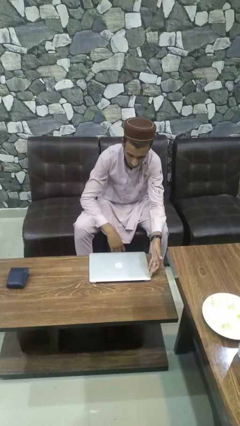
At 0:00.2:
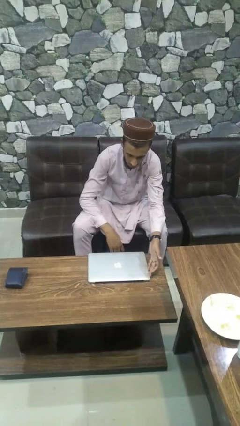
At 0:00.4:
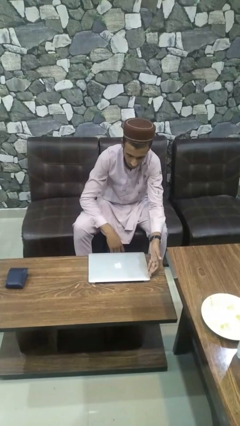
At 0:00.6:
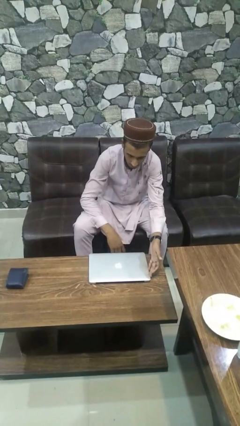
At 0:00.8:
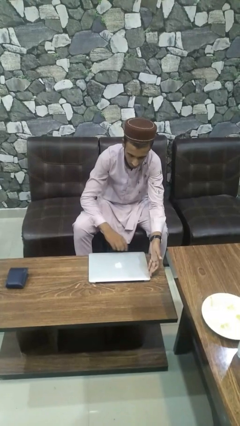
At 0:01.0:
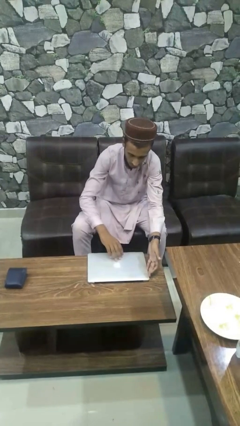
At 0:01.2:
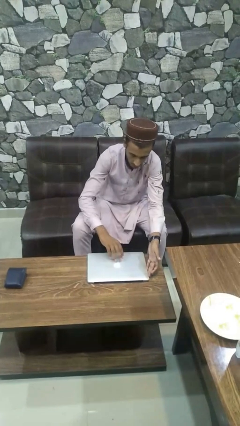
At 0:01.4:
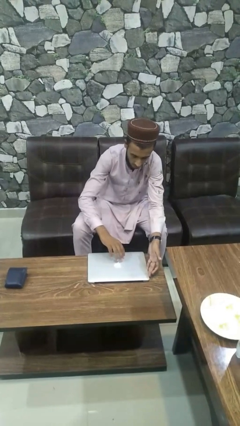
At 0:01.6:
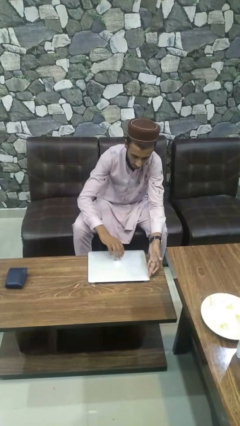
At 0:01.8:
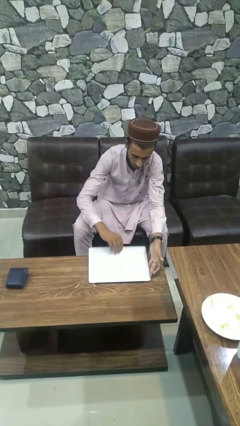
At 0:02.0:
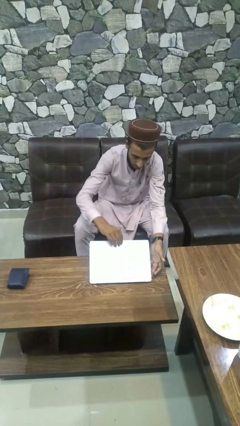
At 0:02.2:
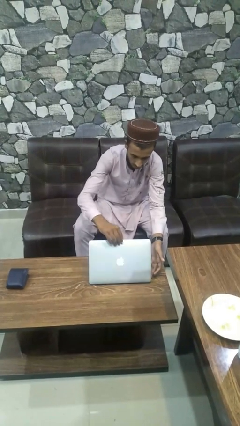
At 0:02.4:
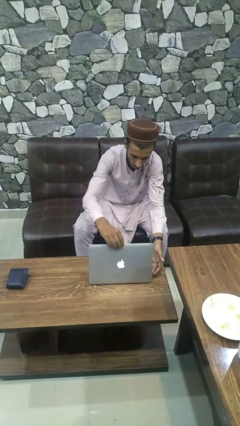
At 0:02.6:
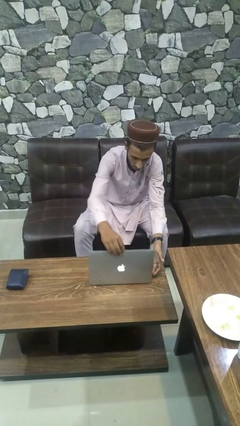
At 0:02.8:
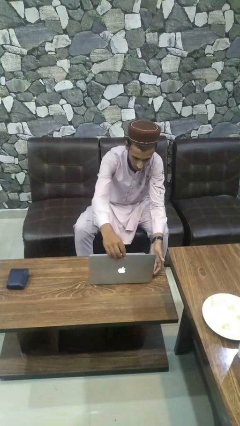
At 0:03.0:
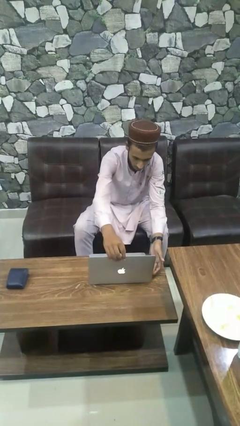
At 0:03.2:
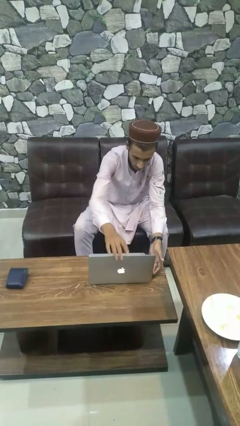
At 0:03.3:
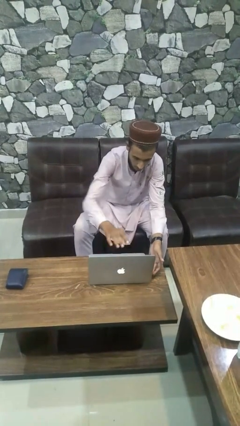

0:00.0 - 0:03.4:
person opens laptop

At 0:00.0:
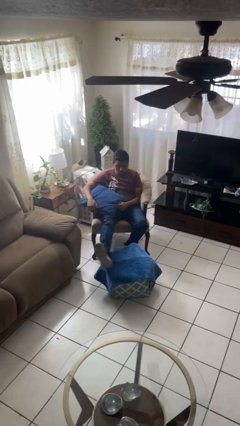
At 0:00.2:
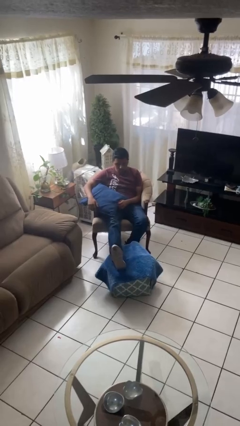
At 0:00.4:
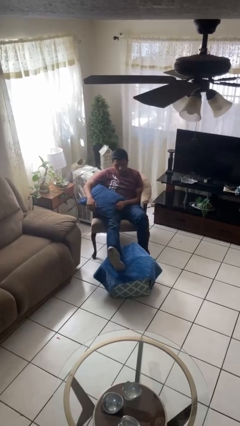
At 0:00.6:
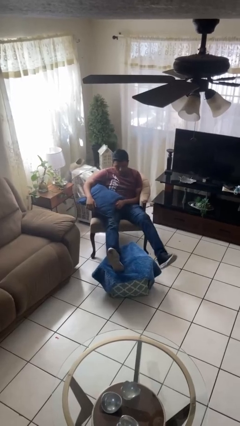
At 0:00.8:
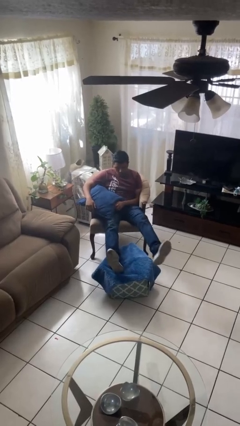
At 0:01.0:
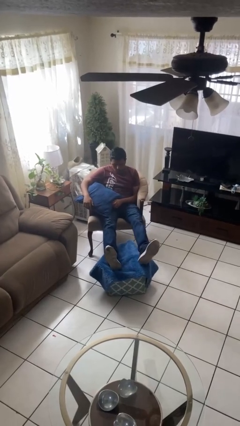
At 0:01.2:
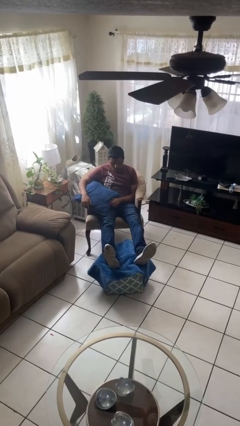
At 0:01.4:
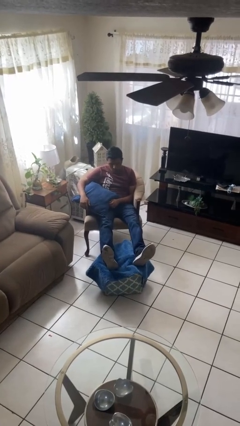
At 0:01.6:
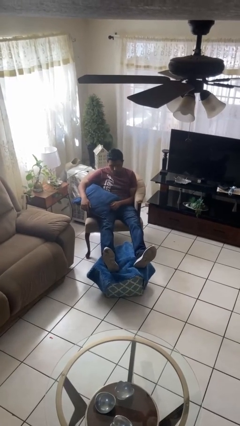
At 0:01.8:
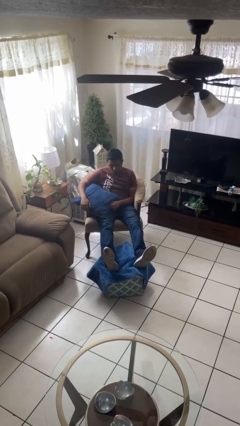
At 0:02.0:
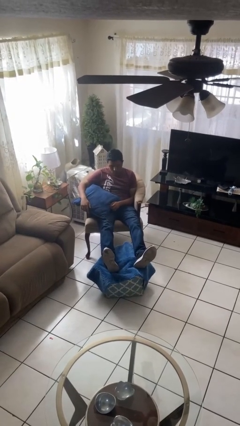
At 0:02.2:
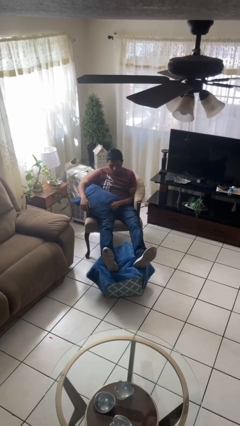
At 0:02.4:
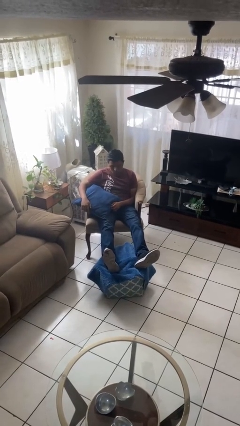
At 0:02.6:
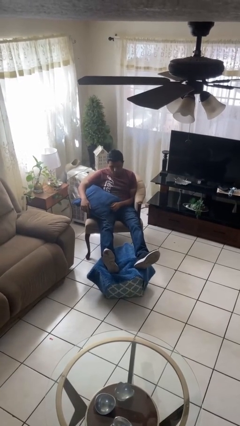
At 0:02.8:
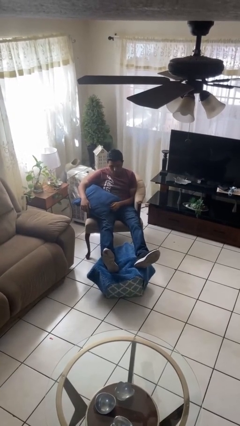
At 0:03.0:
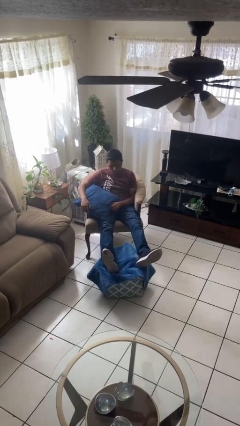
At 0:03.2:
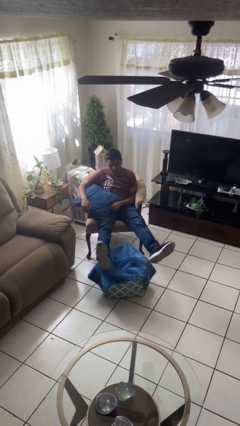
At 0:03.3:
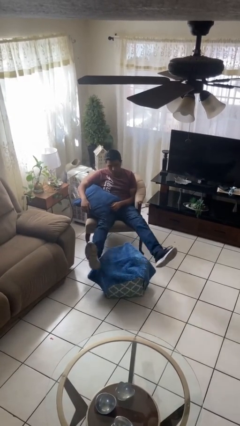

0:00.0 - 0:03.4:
person puts feet up

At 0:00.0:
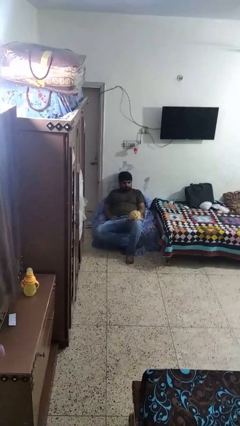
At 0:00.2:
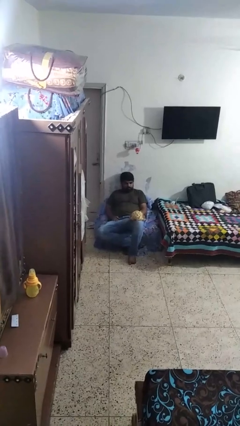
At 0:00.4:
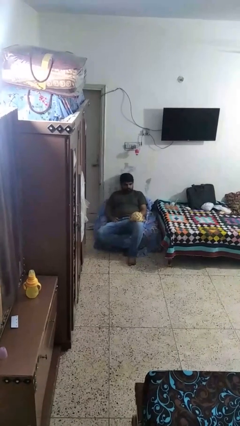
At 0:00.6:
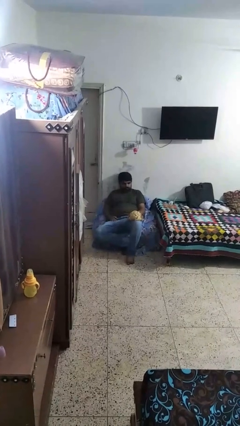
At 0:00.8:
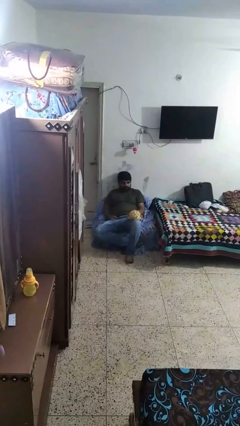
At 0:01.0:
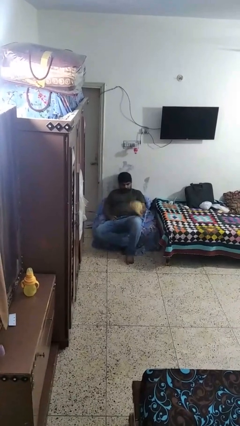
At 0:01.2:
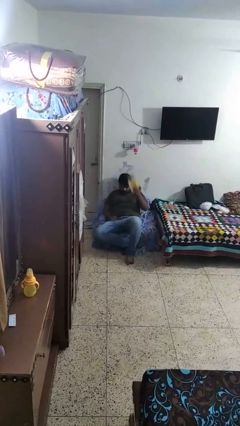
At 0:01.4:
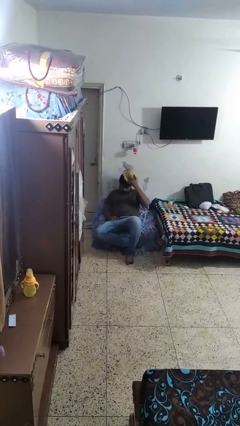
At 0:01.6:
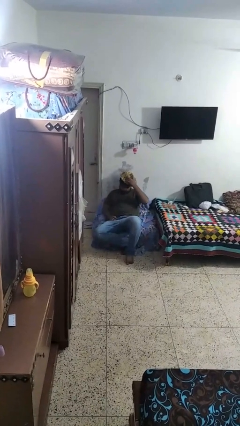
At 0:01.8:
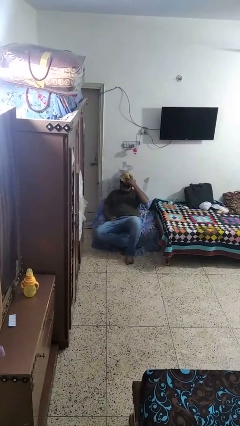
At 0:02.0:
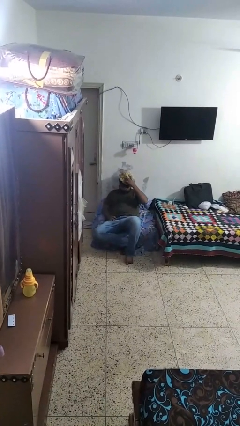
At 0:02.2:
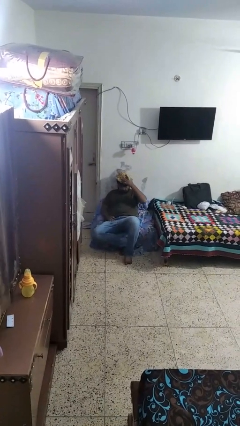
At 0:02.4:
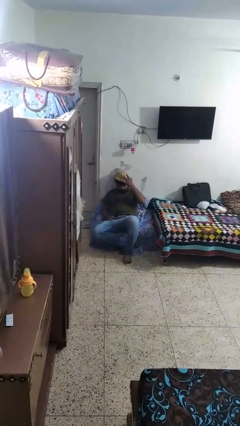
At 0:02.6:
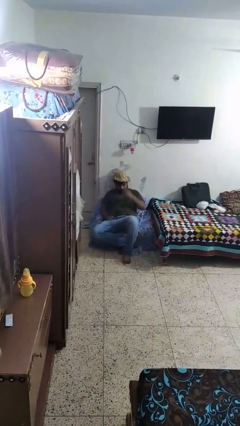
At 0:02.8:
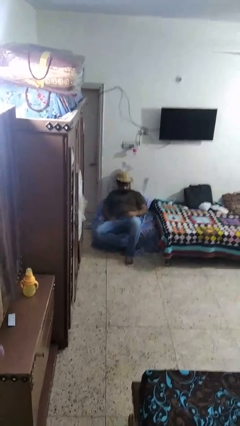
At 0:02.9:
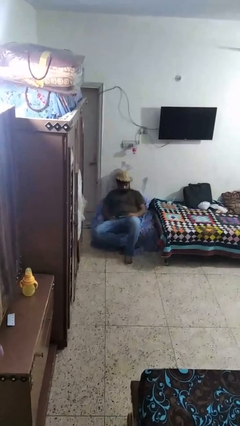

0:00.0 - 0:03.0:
person puts on hat

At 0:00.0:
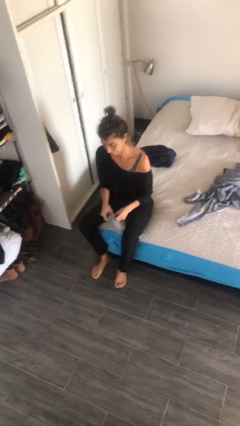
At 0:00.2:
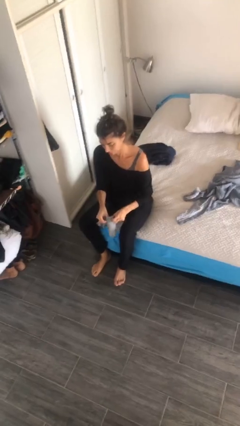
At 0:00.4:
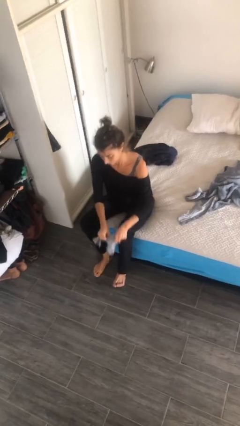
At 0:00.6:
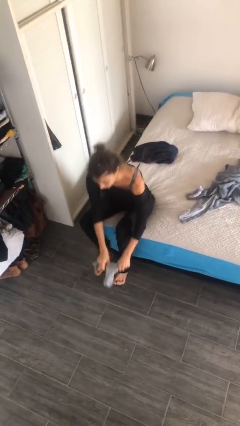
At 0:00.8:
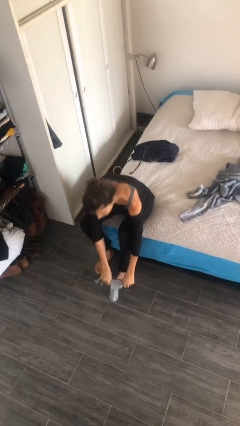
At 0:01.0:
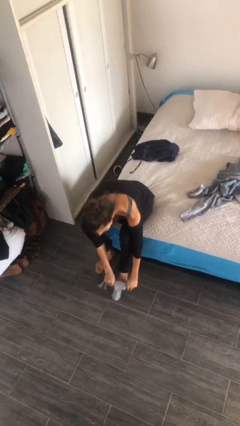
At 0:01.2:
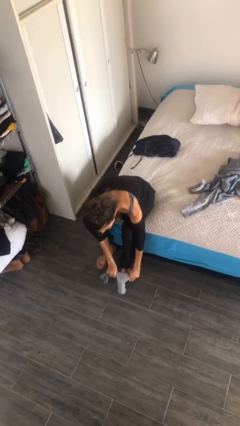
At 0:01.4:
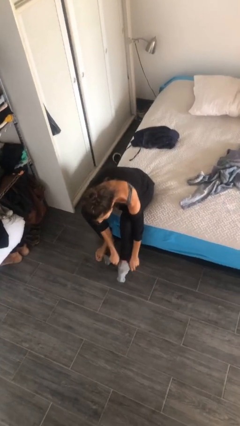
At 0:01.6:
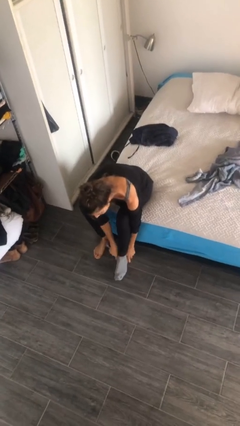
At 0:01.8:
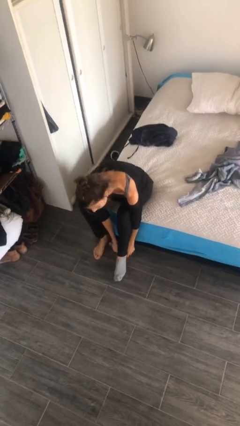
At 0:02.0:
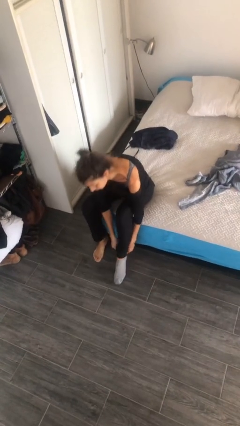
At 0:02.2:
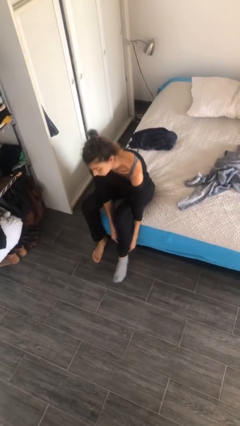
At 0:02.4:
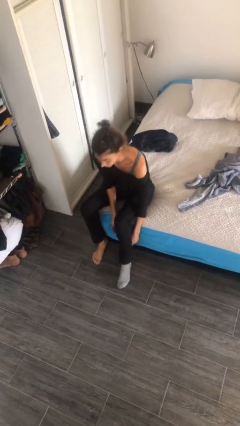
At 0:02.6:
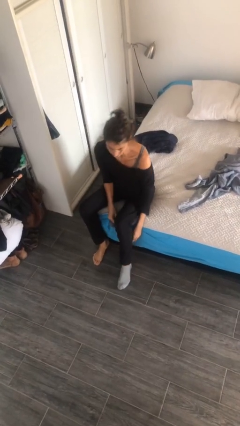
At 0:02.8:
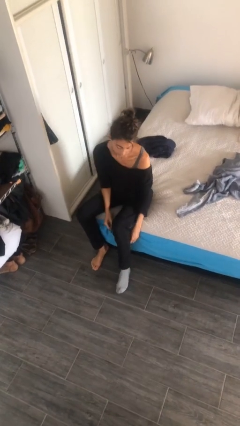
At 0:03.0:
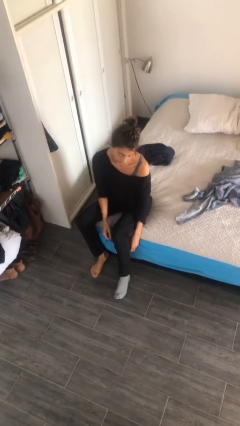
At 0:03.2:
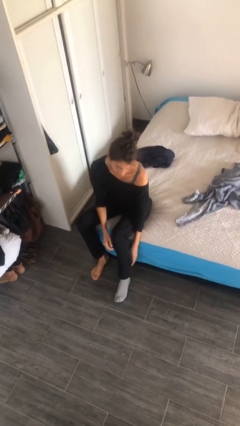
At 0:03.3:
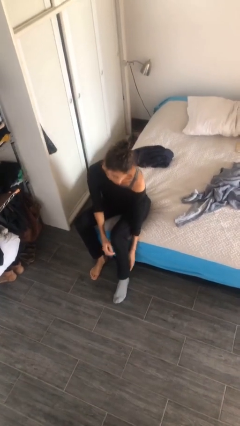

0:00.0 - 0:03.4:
person puts on socks

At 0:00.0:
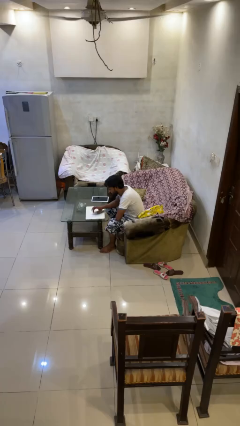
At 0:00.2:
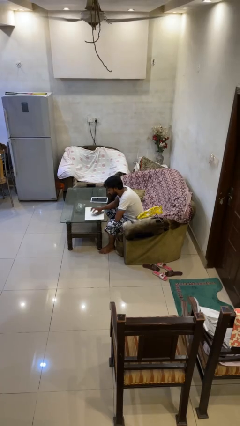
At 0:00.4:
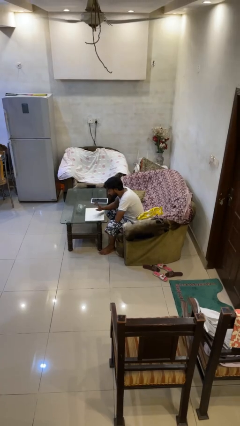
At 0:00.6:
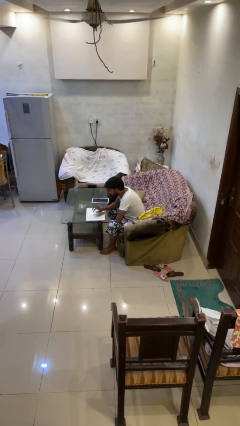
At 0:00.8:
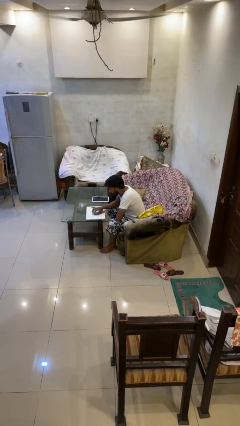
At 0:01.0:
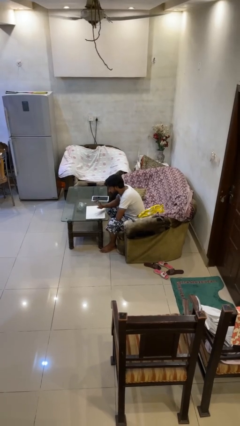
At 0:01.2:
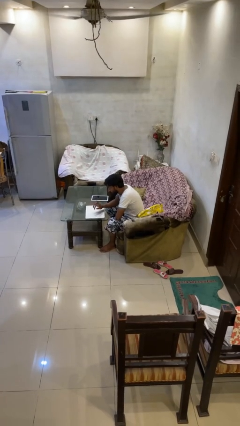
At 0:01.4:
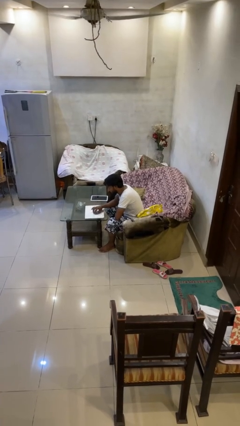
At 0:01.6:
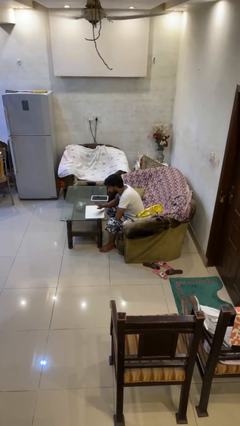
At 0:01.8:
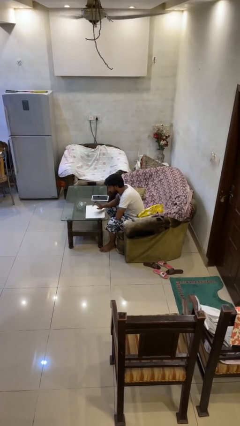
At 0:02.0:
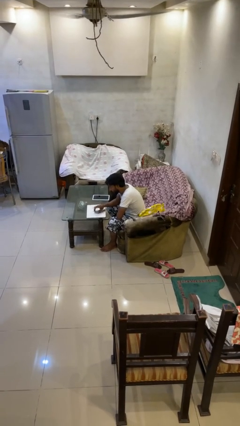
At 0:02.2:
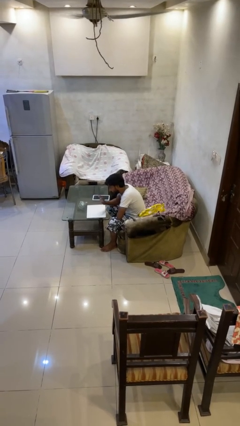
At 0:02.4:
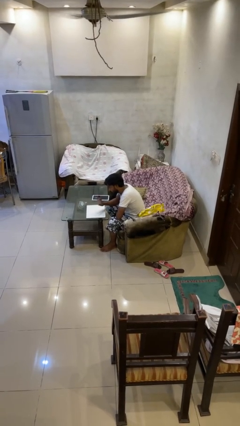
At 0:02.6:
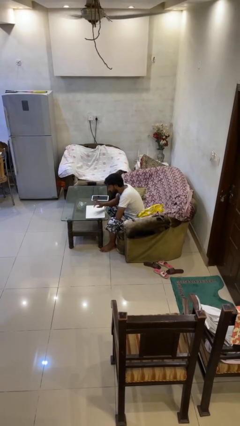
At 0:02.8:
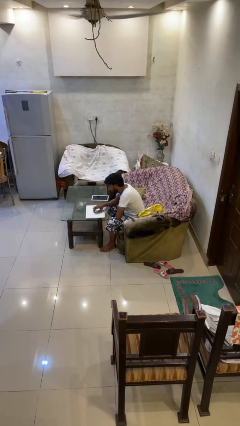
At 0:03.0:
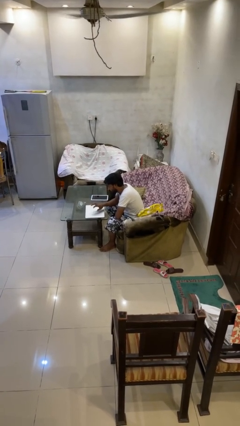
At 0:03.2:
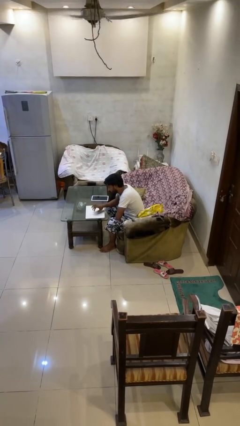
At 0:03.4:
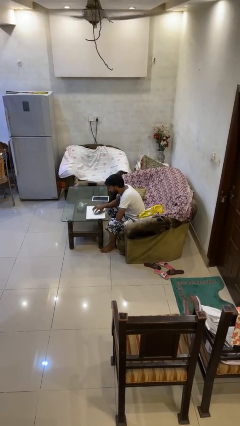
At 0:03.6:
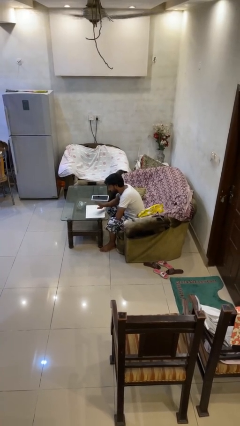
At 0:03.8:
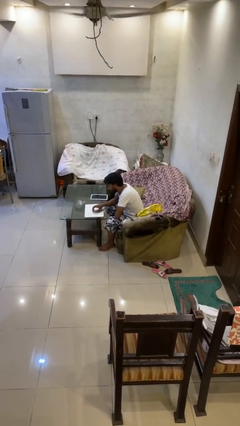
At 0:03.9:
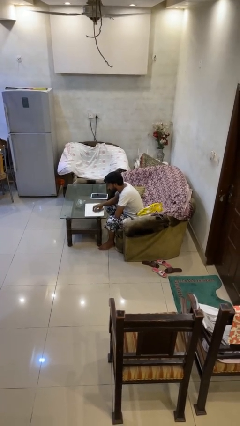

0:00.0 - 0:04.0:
person taps object with finger

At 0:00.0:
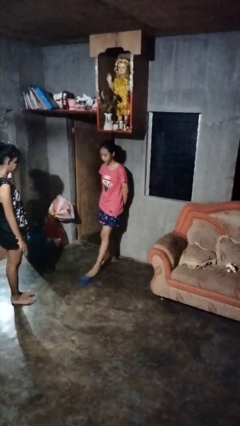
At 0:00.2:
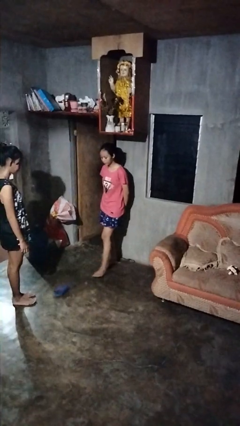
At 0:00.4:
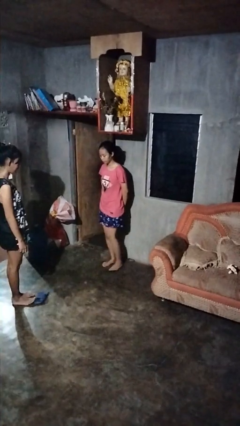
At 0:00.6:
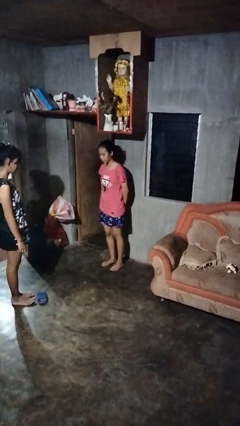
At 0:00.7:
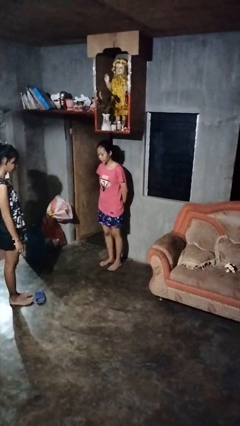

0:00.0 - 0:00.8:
person kicks object to person
